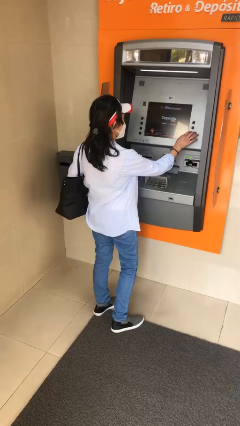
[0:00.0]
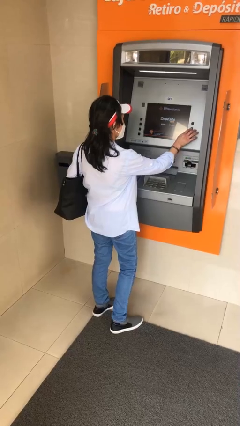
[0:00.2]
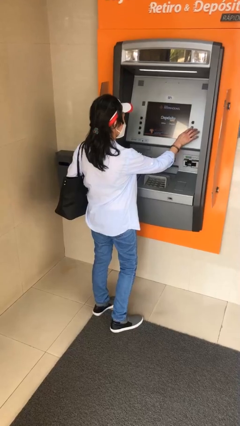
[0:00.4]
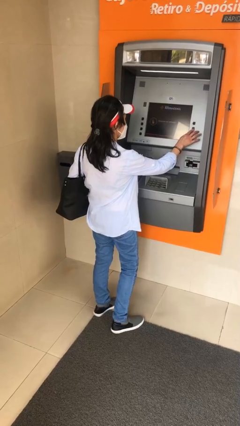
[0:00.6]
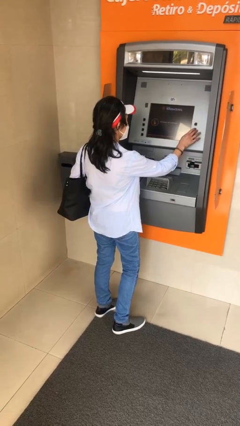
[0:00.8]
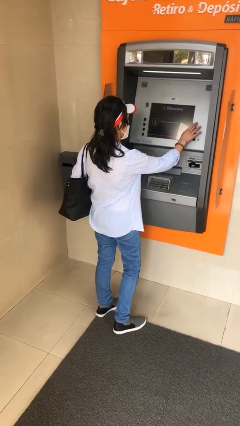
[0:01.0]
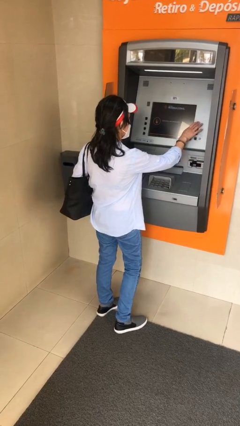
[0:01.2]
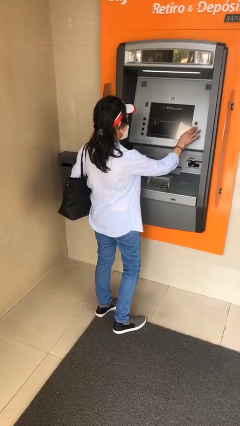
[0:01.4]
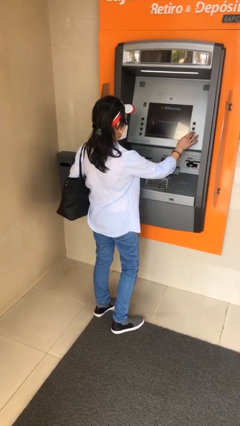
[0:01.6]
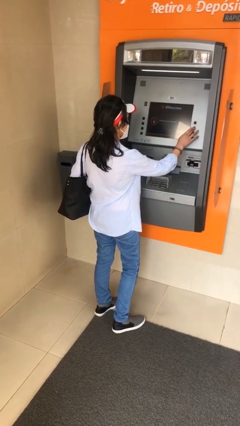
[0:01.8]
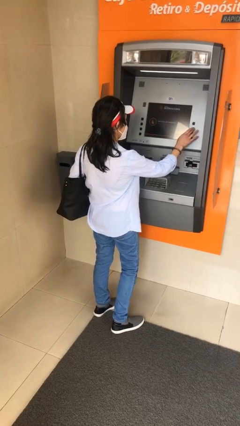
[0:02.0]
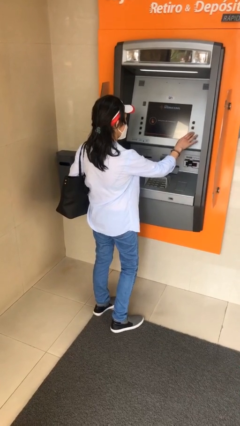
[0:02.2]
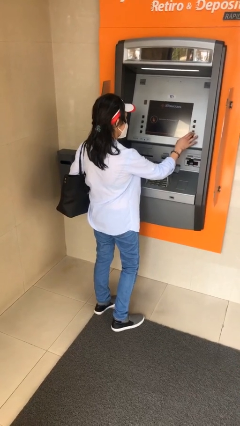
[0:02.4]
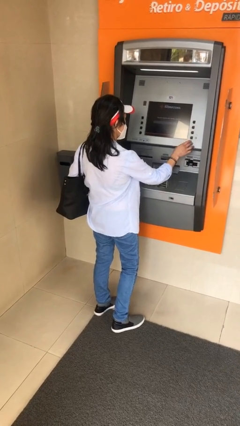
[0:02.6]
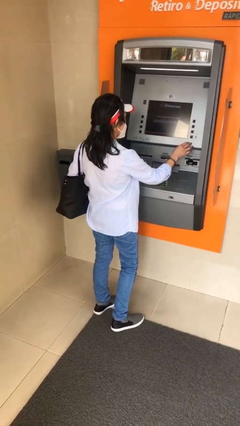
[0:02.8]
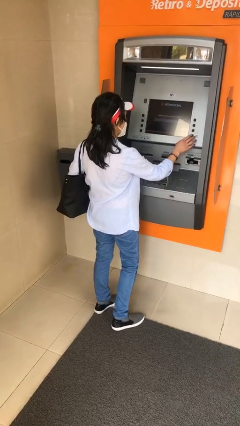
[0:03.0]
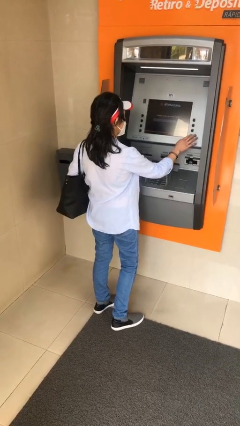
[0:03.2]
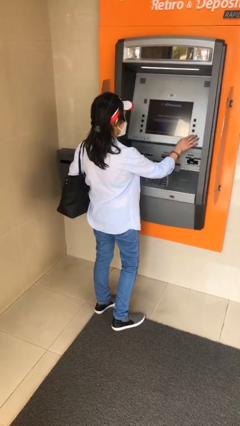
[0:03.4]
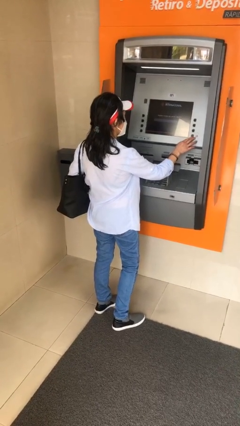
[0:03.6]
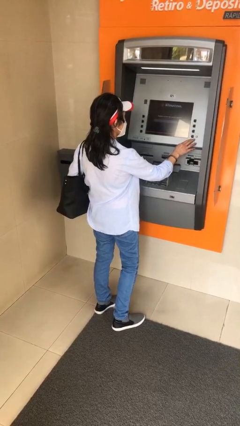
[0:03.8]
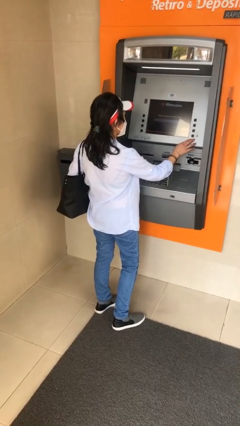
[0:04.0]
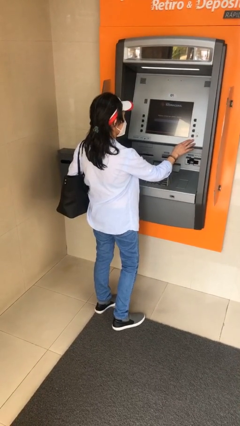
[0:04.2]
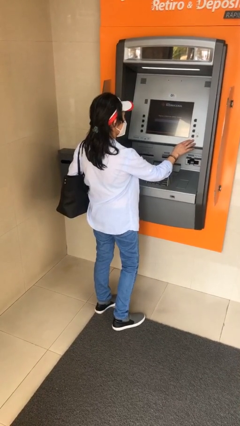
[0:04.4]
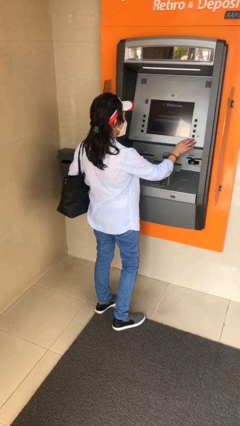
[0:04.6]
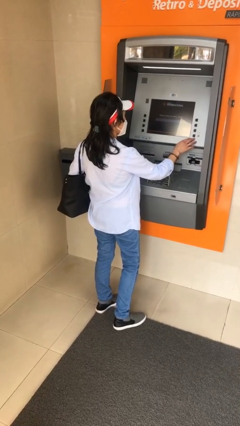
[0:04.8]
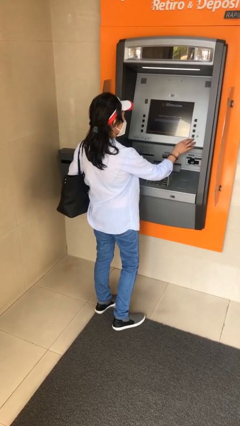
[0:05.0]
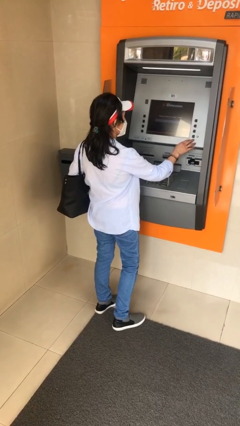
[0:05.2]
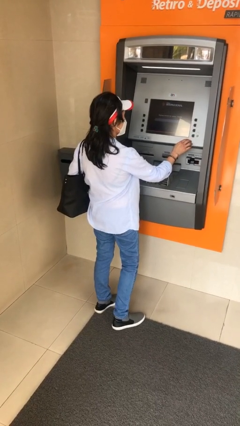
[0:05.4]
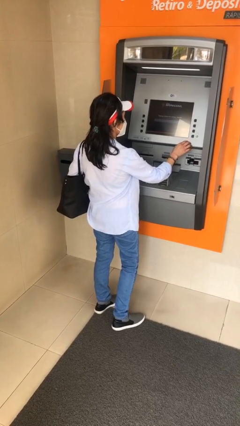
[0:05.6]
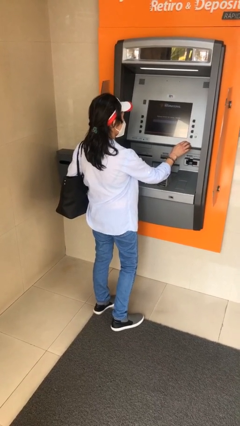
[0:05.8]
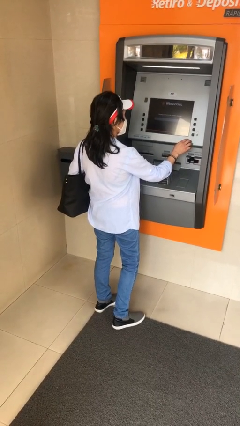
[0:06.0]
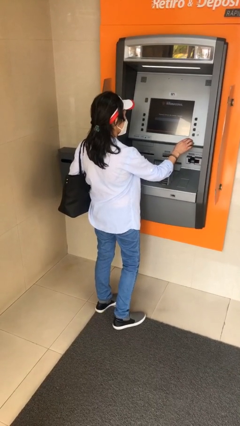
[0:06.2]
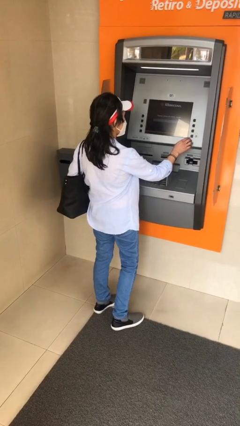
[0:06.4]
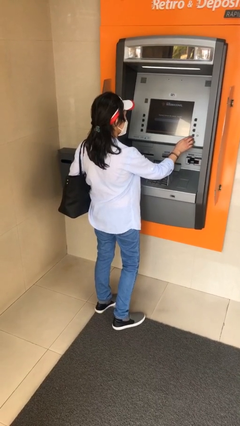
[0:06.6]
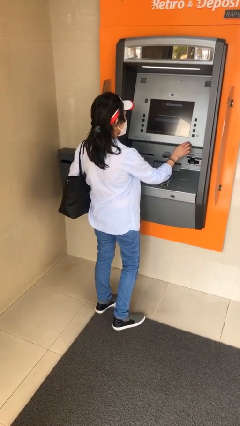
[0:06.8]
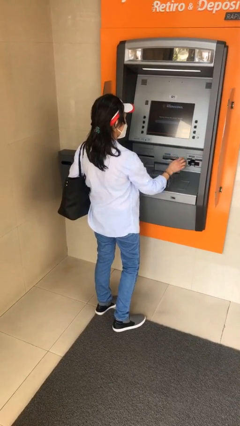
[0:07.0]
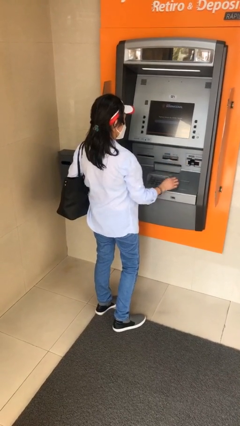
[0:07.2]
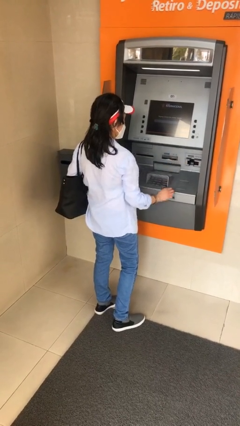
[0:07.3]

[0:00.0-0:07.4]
person purchases from machine

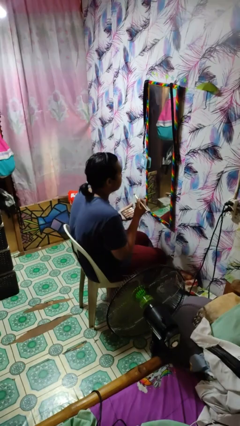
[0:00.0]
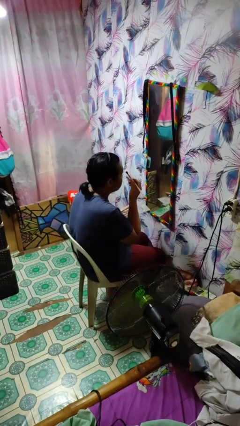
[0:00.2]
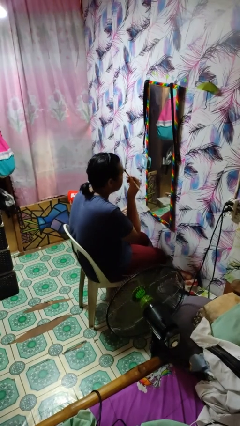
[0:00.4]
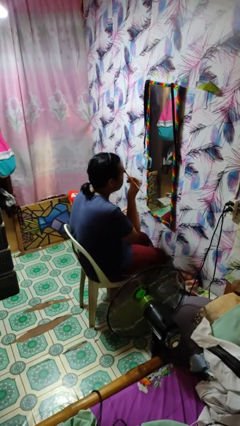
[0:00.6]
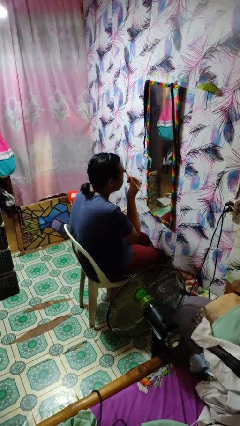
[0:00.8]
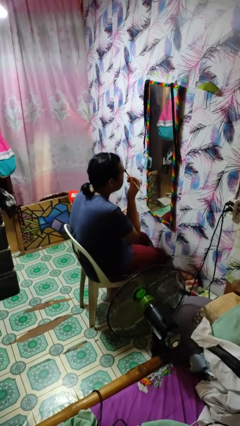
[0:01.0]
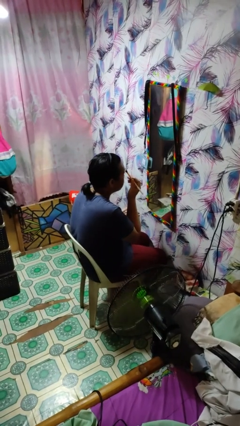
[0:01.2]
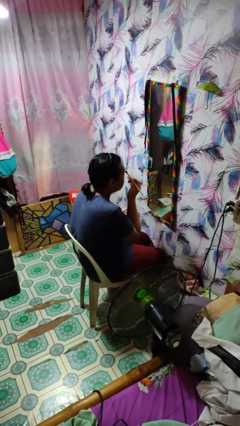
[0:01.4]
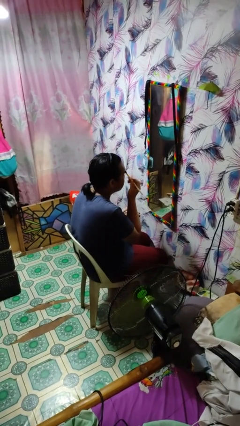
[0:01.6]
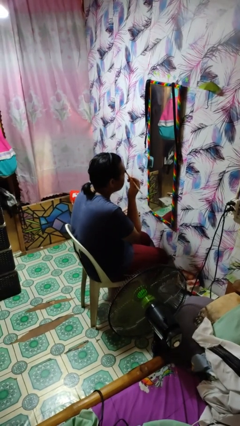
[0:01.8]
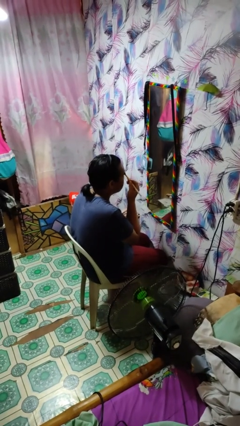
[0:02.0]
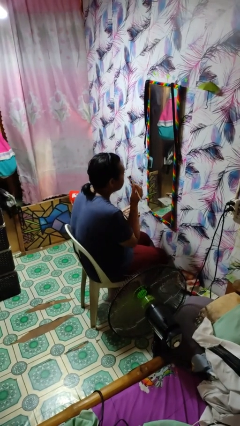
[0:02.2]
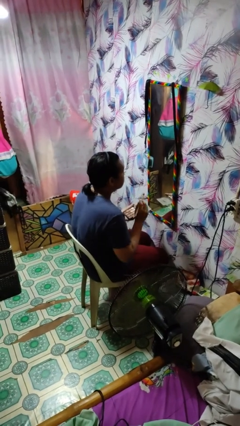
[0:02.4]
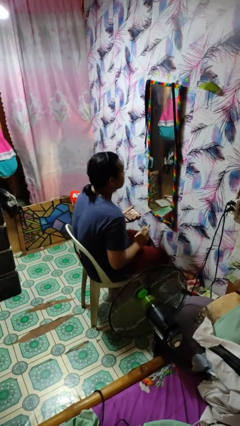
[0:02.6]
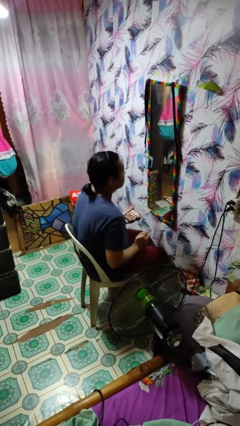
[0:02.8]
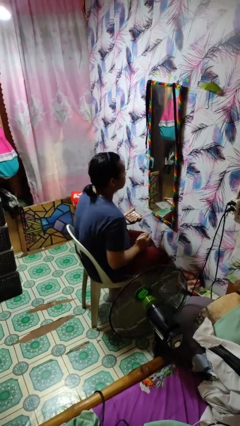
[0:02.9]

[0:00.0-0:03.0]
person applies eye makeup

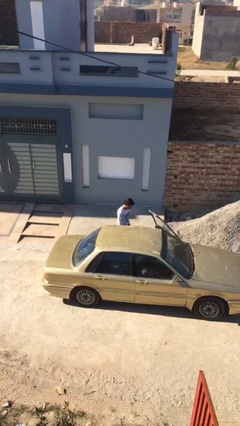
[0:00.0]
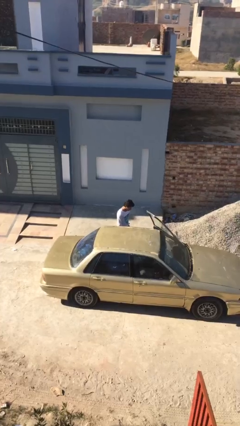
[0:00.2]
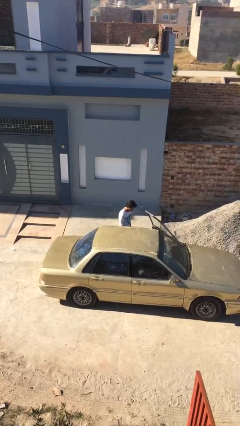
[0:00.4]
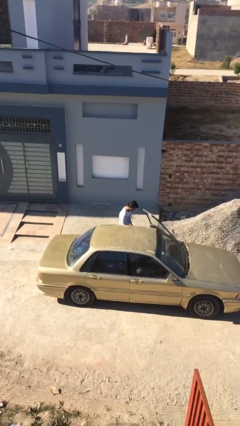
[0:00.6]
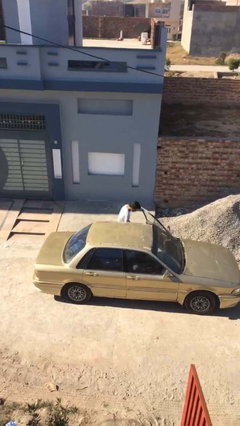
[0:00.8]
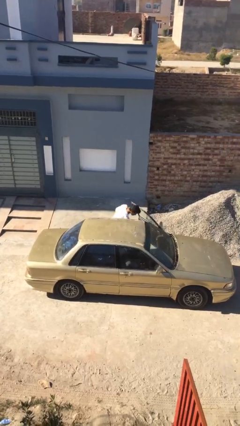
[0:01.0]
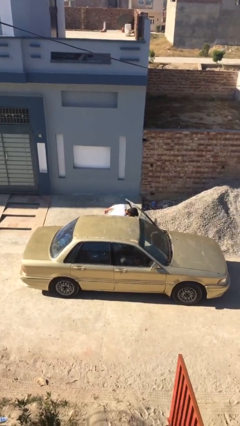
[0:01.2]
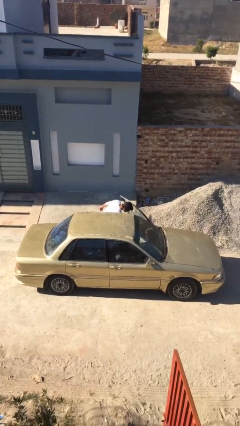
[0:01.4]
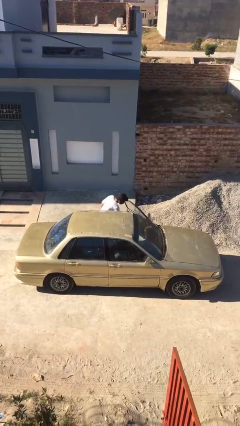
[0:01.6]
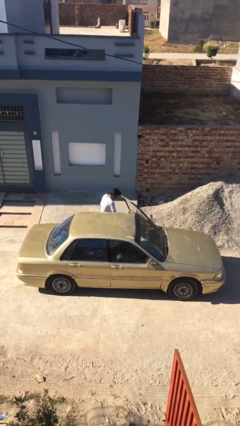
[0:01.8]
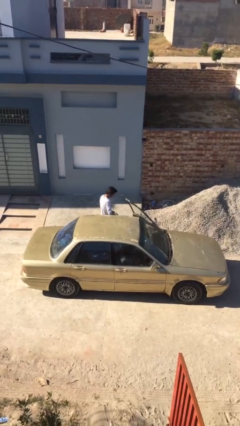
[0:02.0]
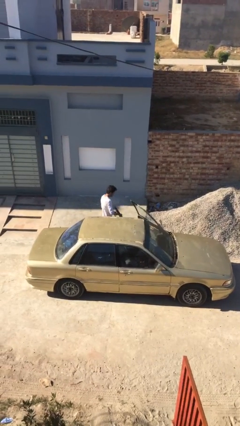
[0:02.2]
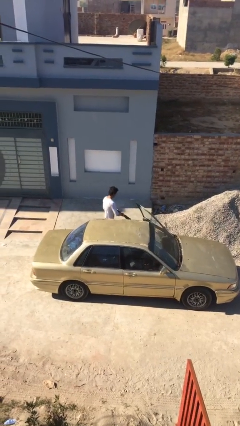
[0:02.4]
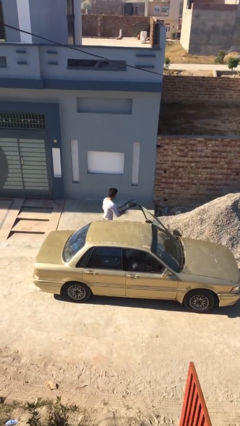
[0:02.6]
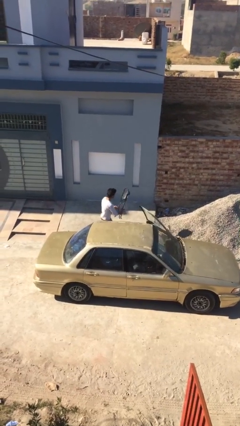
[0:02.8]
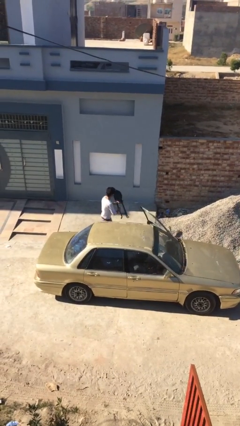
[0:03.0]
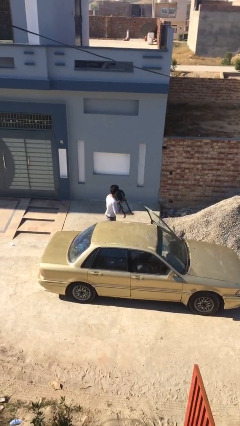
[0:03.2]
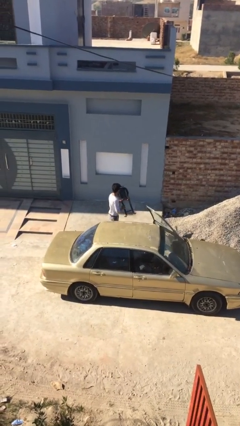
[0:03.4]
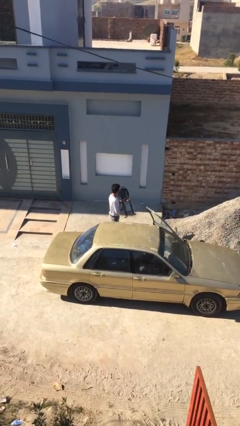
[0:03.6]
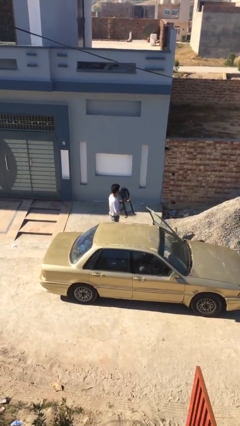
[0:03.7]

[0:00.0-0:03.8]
person unloads car

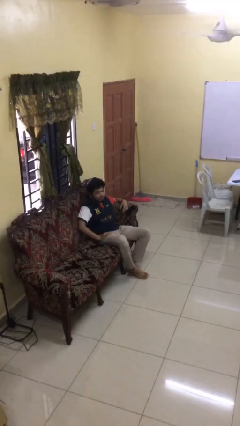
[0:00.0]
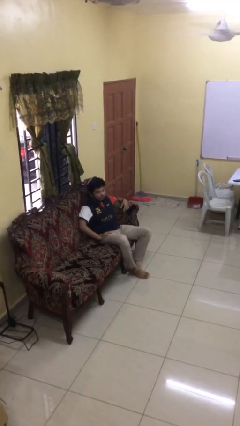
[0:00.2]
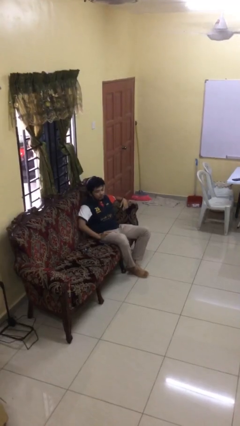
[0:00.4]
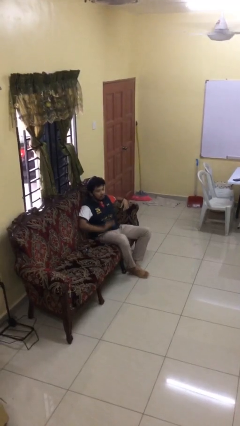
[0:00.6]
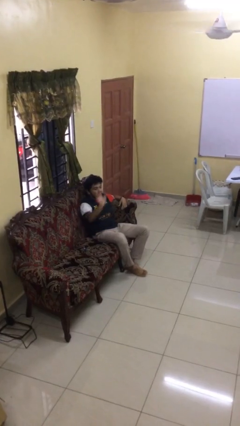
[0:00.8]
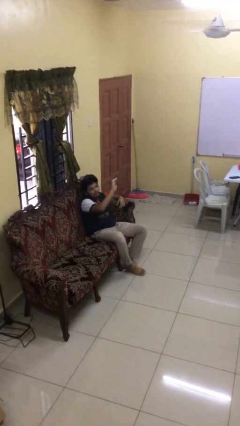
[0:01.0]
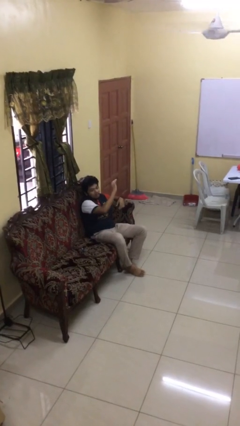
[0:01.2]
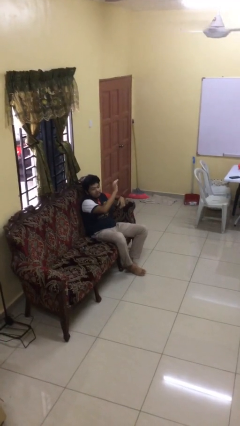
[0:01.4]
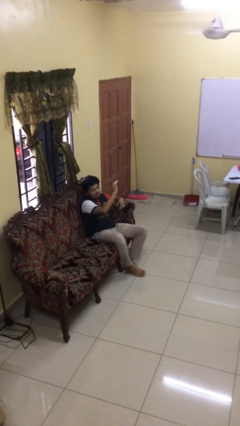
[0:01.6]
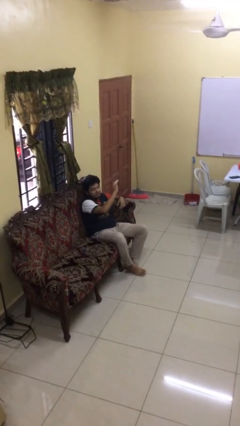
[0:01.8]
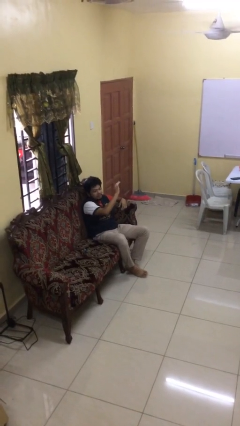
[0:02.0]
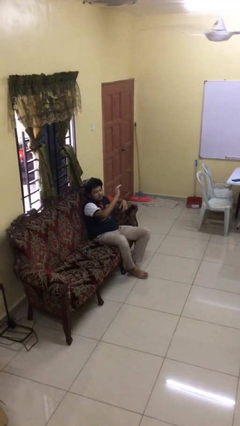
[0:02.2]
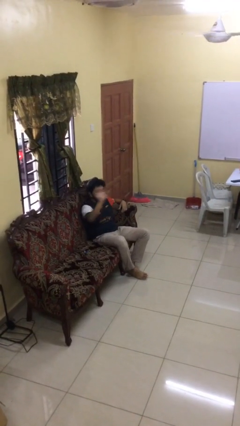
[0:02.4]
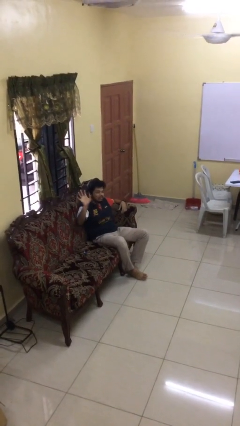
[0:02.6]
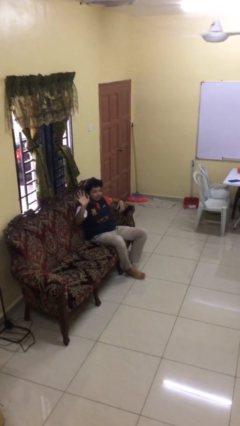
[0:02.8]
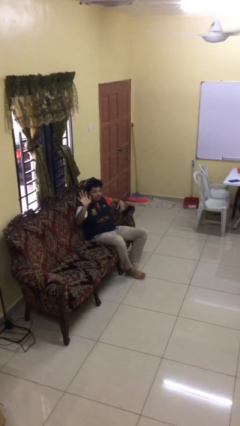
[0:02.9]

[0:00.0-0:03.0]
person gestures swipe left

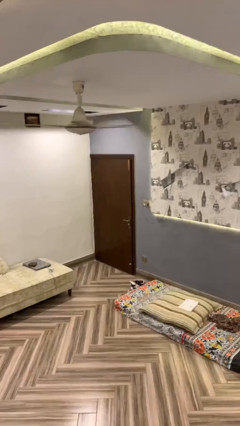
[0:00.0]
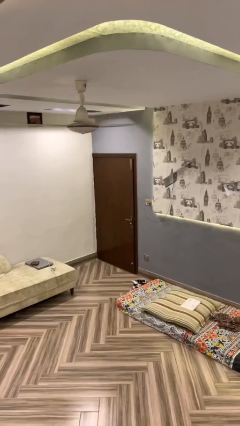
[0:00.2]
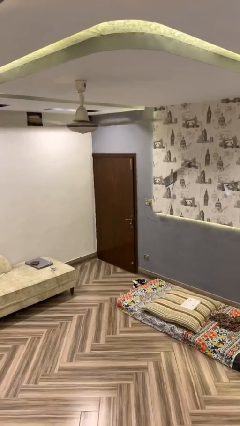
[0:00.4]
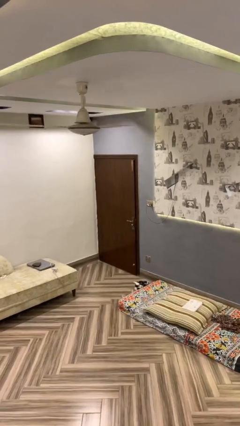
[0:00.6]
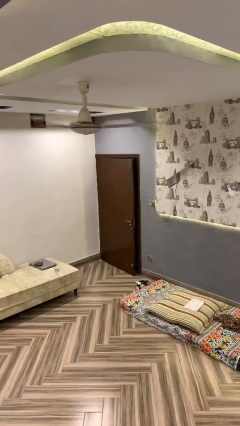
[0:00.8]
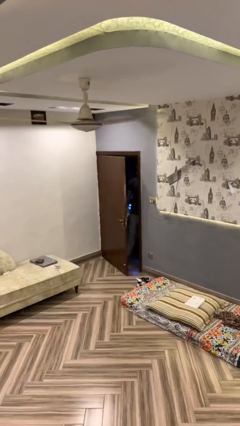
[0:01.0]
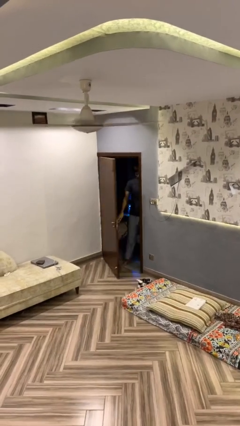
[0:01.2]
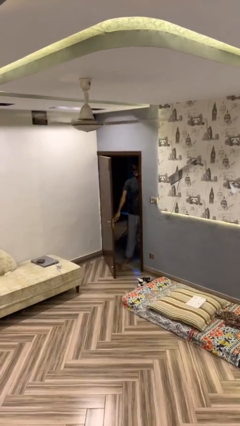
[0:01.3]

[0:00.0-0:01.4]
person opens facility door
